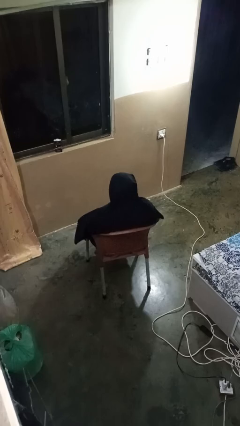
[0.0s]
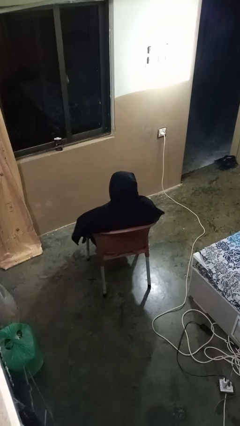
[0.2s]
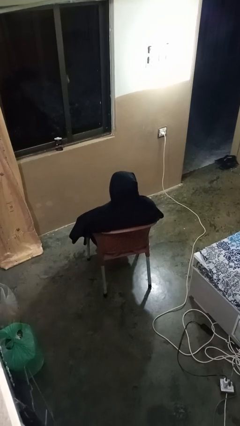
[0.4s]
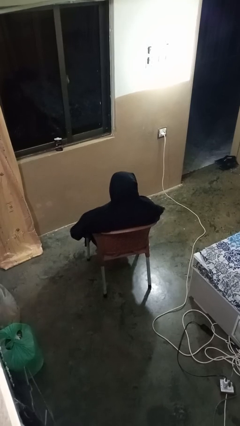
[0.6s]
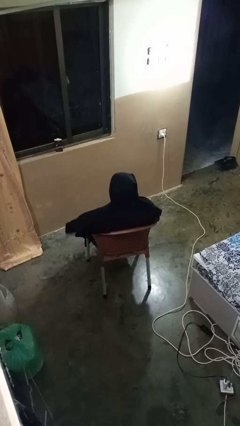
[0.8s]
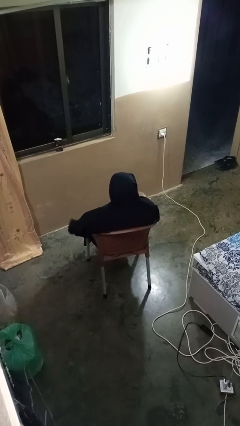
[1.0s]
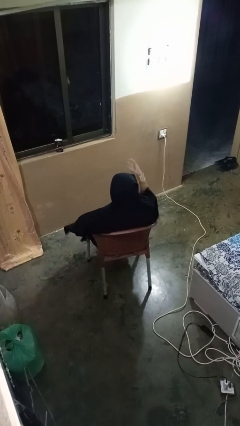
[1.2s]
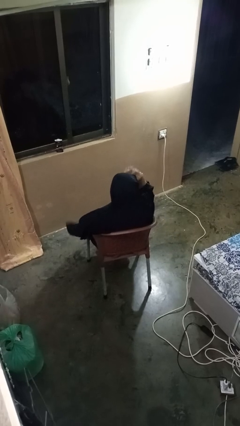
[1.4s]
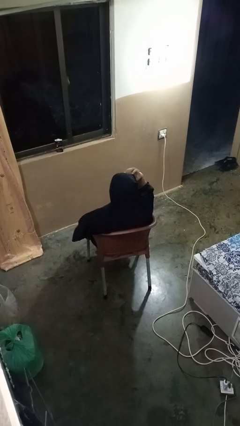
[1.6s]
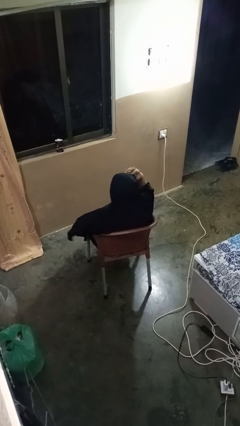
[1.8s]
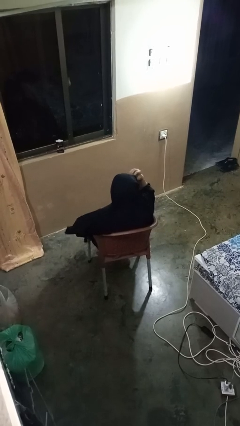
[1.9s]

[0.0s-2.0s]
person scratches face

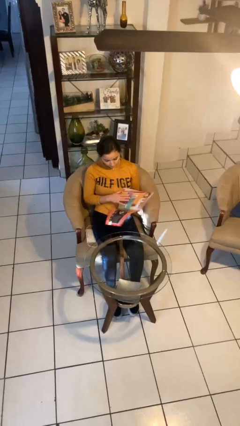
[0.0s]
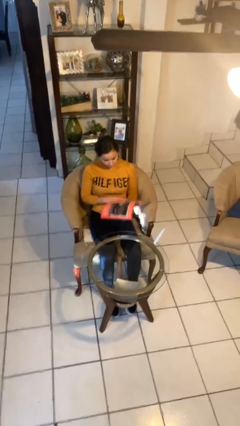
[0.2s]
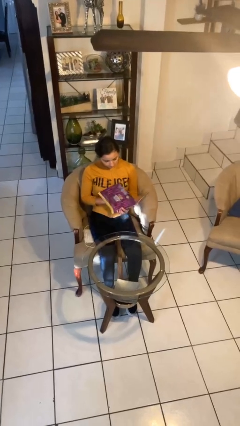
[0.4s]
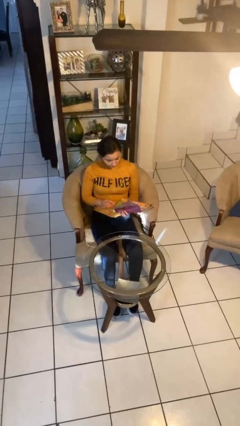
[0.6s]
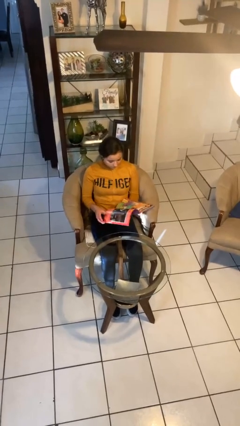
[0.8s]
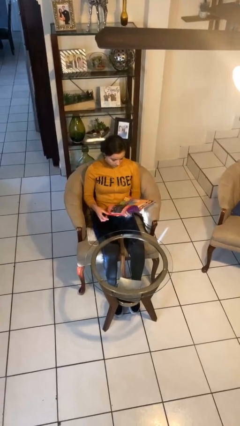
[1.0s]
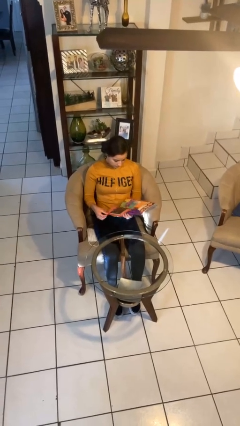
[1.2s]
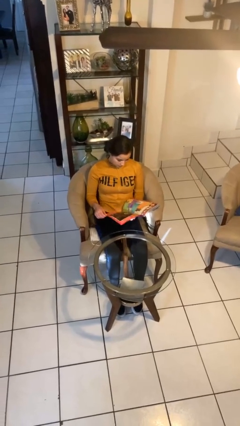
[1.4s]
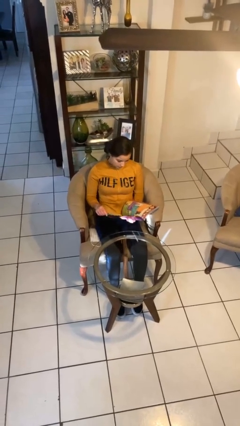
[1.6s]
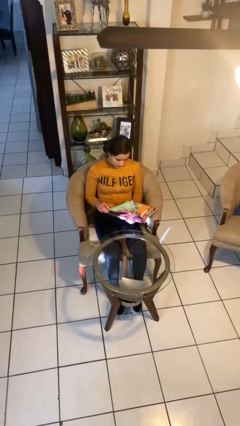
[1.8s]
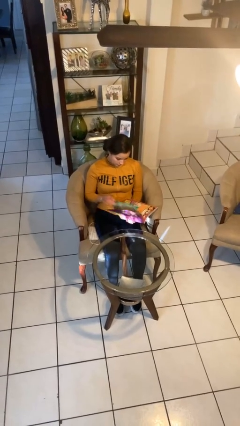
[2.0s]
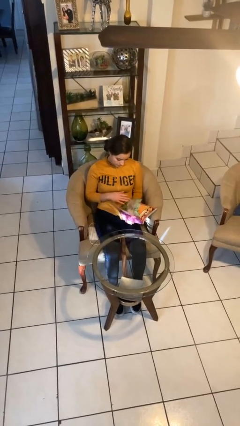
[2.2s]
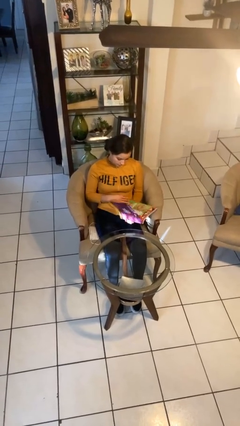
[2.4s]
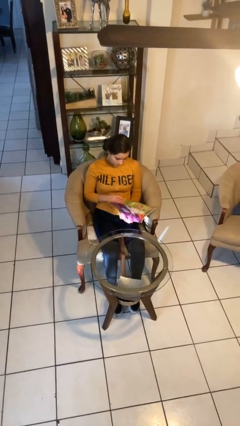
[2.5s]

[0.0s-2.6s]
person reads magazine

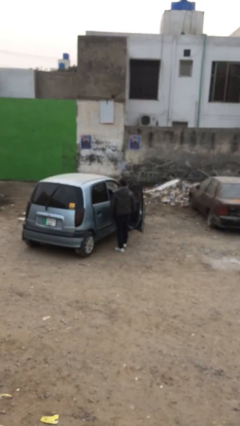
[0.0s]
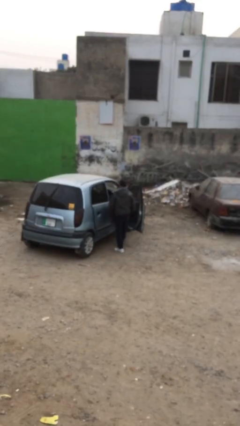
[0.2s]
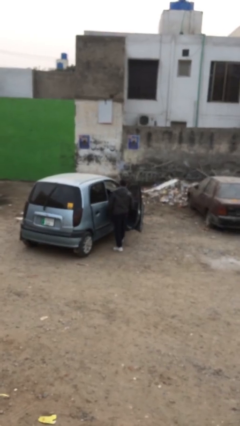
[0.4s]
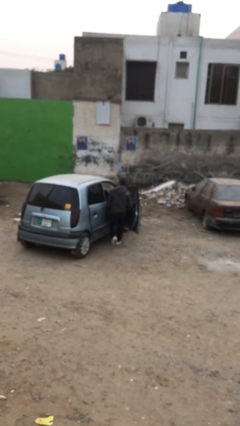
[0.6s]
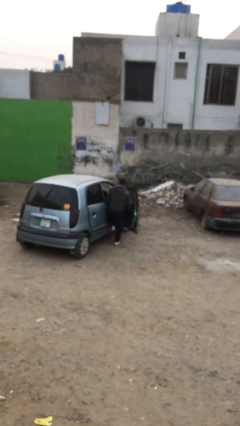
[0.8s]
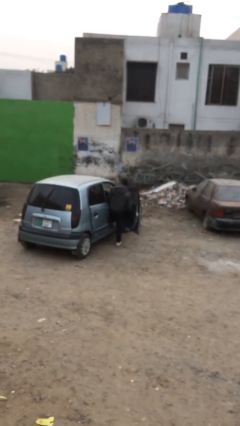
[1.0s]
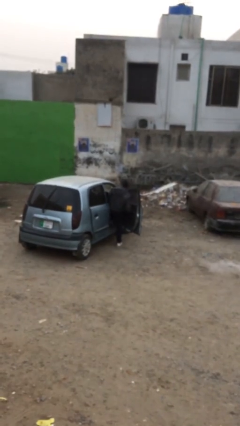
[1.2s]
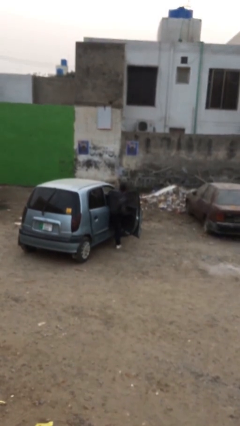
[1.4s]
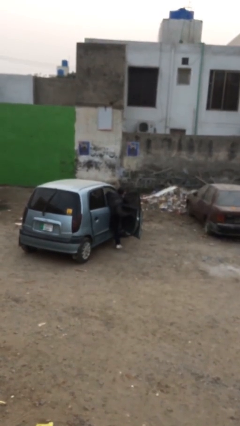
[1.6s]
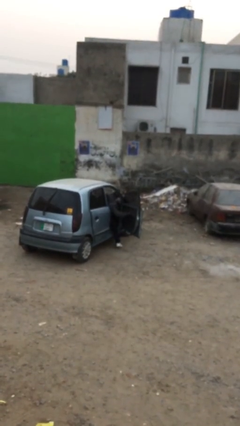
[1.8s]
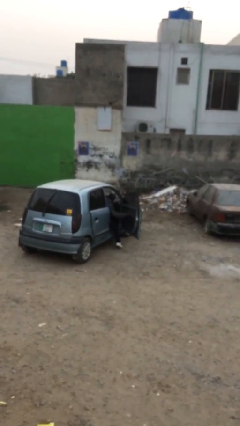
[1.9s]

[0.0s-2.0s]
person enters car

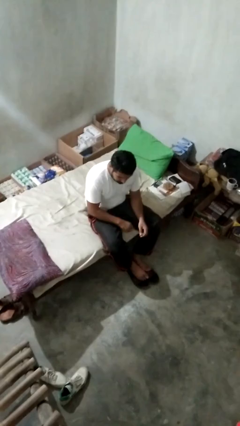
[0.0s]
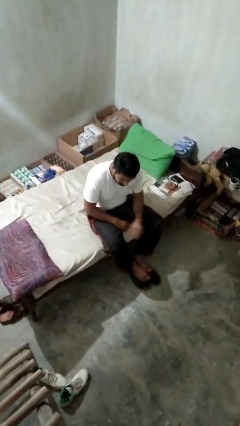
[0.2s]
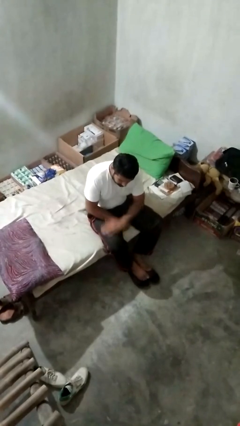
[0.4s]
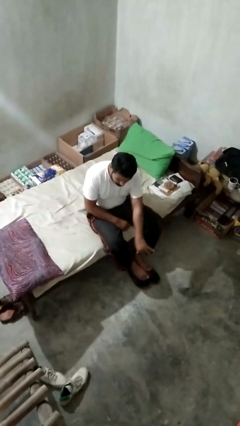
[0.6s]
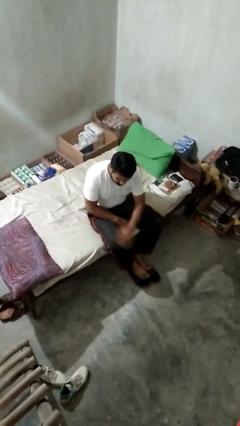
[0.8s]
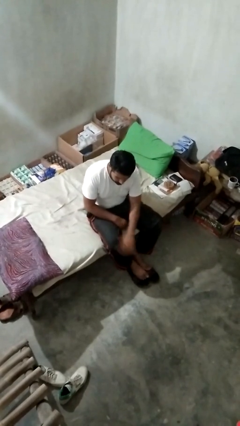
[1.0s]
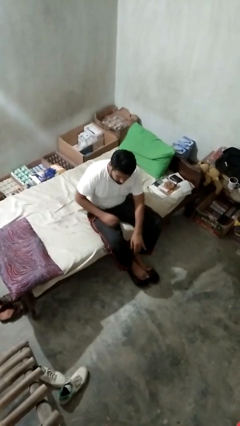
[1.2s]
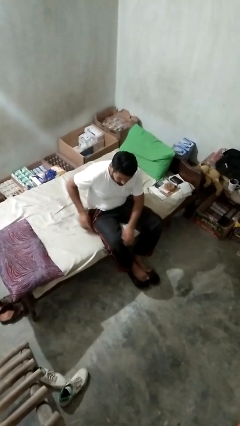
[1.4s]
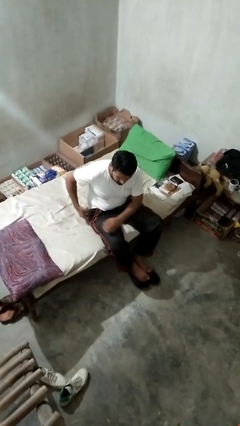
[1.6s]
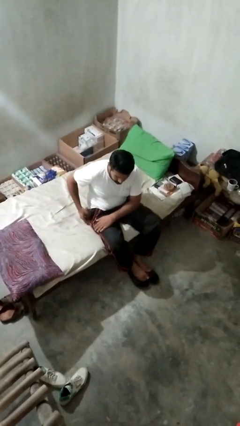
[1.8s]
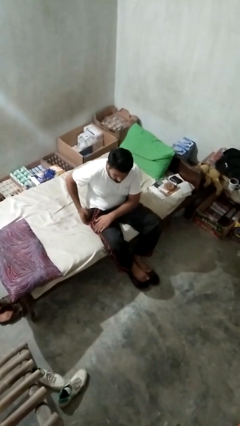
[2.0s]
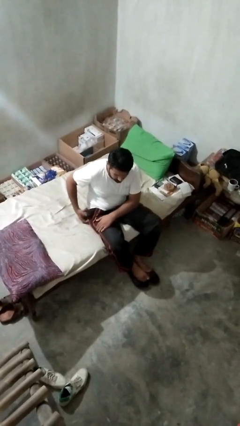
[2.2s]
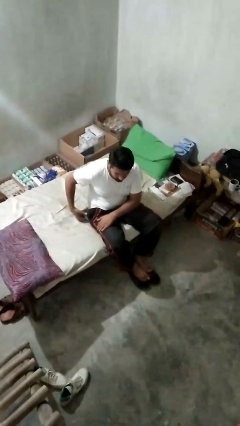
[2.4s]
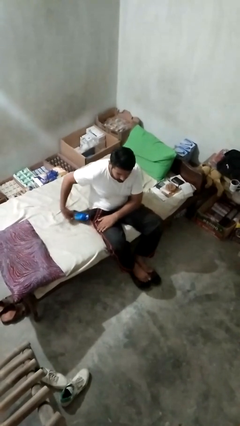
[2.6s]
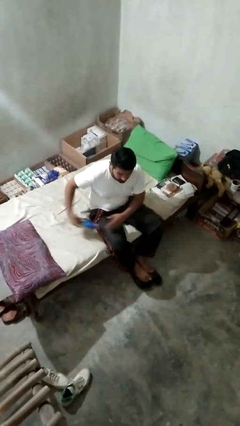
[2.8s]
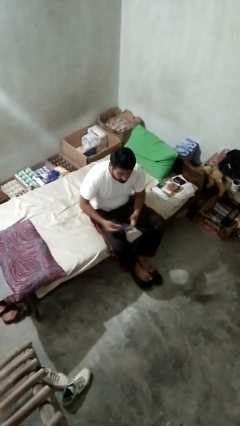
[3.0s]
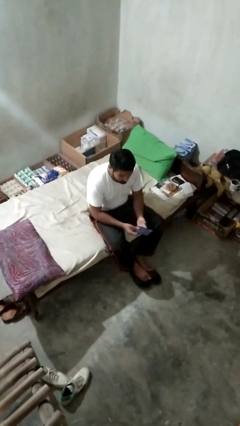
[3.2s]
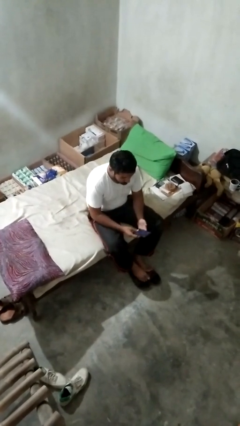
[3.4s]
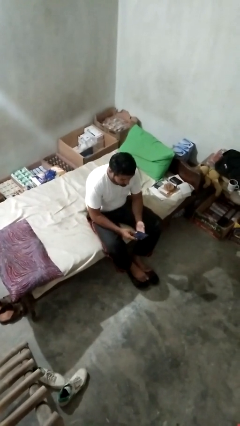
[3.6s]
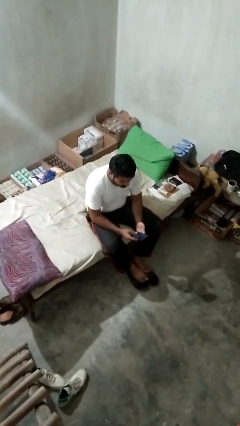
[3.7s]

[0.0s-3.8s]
person takes phone from pocket

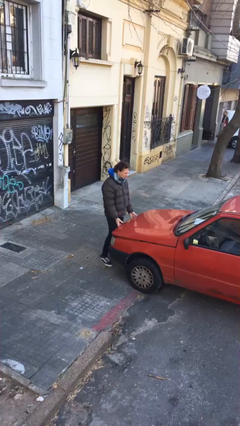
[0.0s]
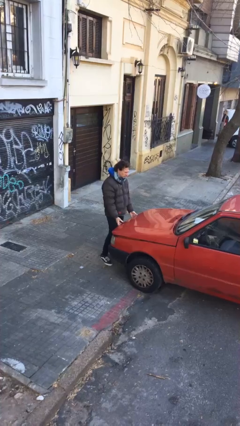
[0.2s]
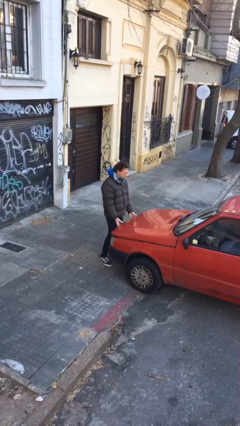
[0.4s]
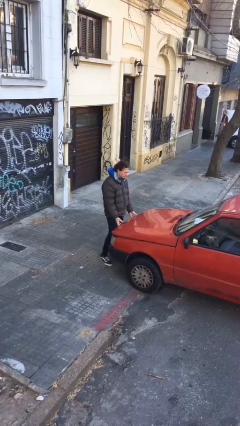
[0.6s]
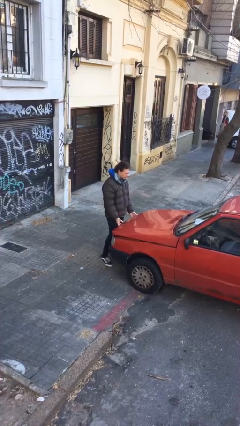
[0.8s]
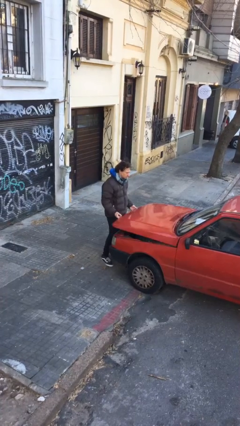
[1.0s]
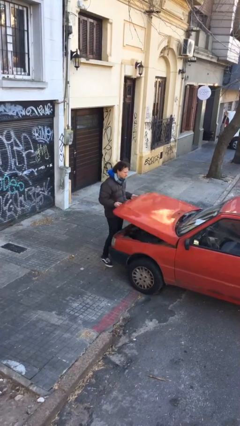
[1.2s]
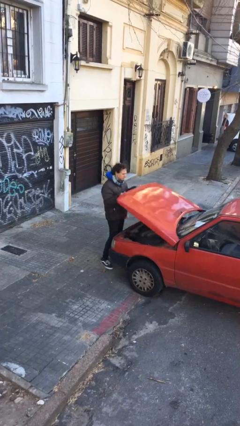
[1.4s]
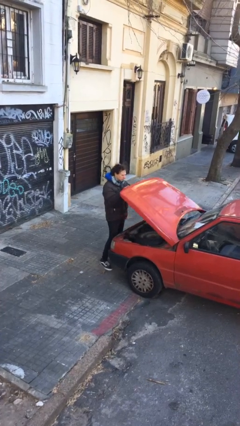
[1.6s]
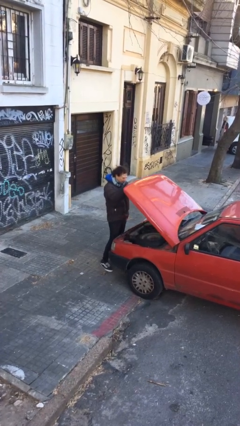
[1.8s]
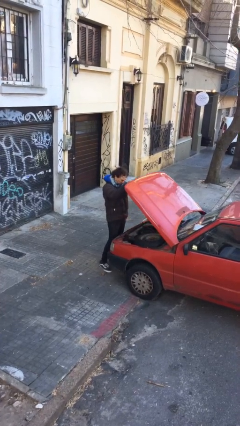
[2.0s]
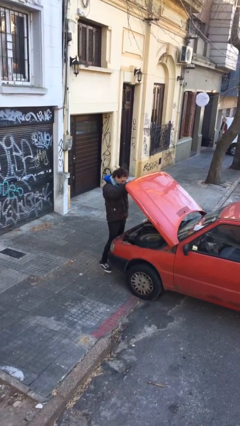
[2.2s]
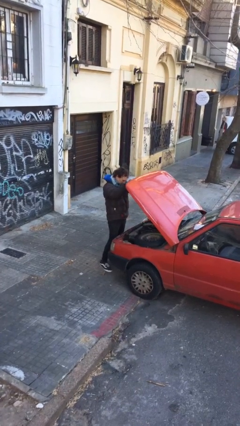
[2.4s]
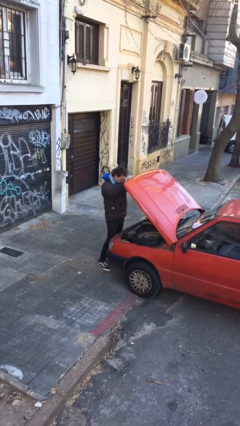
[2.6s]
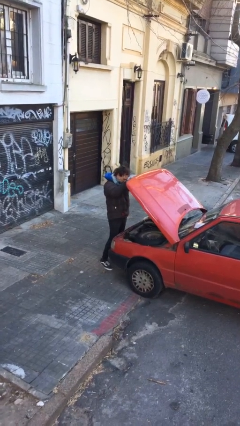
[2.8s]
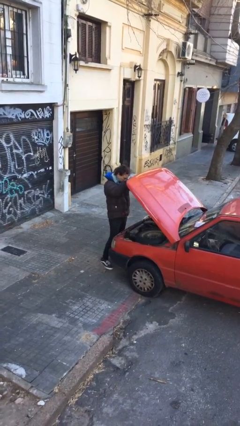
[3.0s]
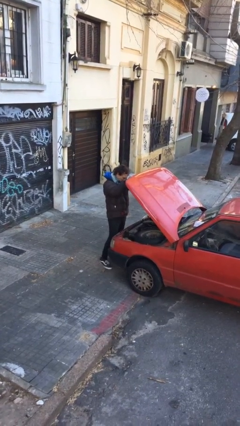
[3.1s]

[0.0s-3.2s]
person opens car hood

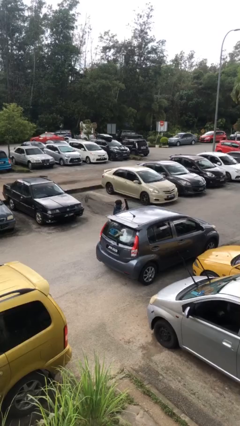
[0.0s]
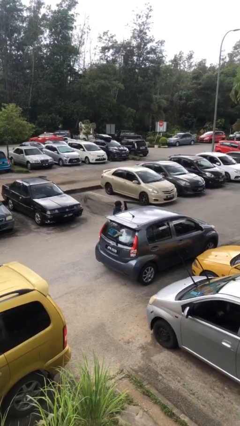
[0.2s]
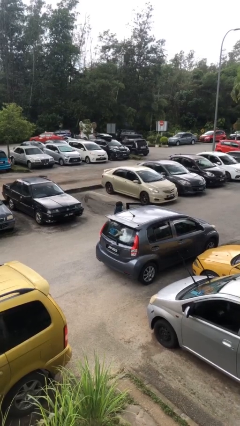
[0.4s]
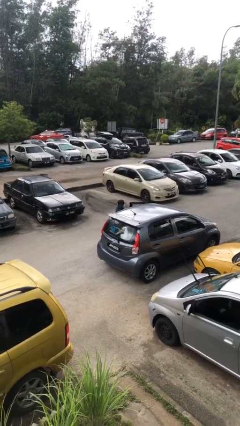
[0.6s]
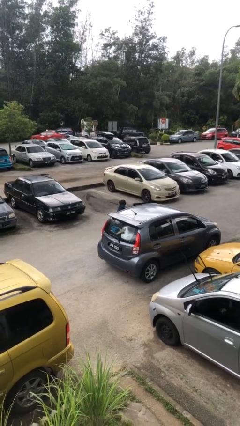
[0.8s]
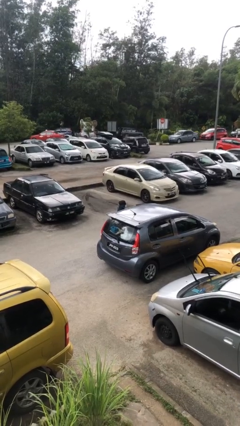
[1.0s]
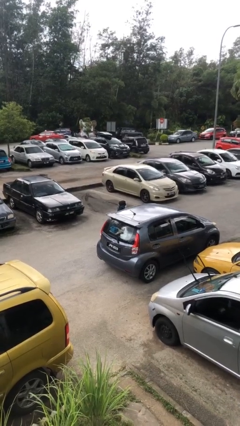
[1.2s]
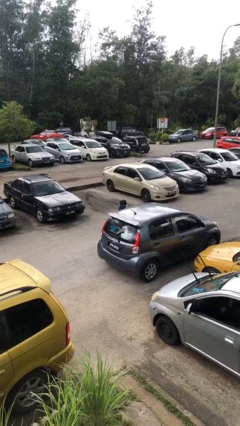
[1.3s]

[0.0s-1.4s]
person closes car door

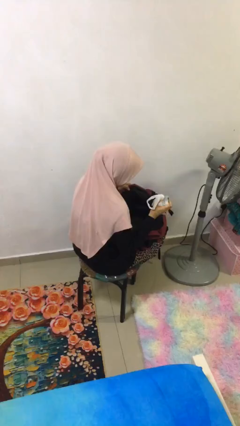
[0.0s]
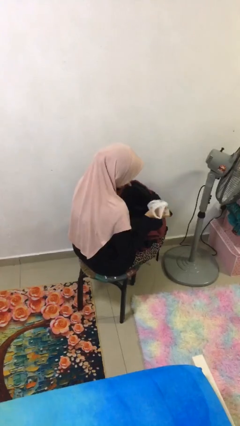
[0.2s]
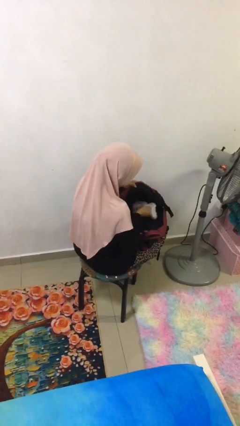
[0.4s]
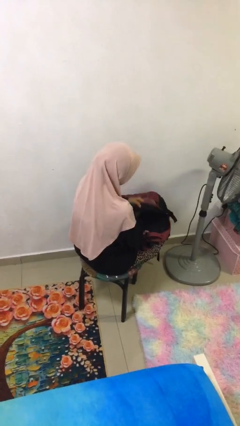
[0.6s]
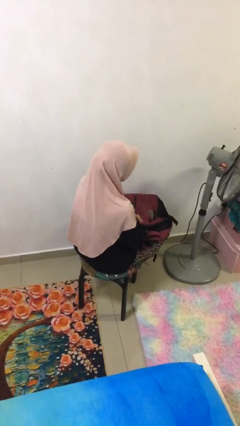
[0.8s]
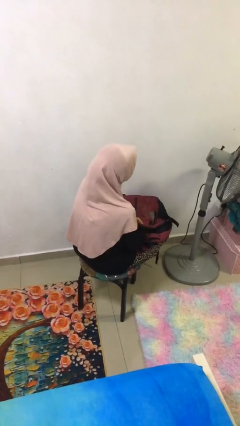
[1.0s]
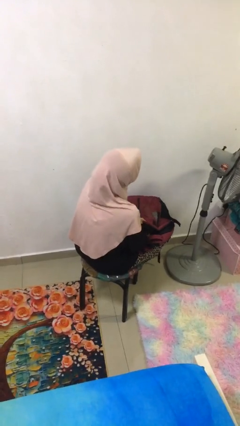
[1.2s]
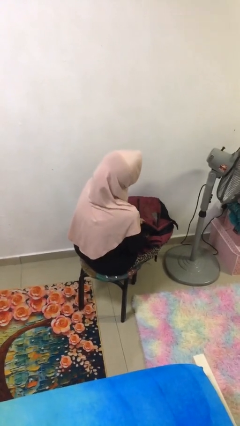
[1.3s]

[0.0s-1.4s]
person puts object into backpack

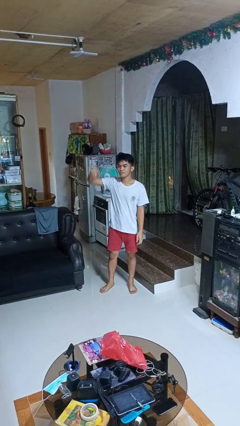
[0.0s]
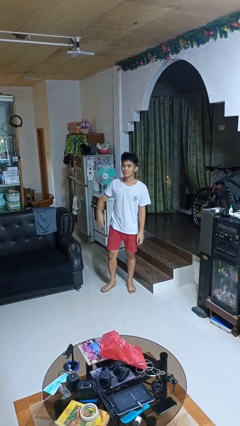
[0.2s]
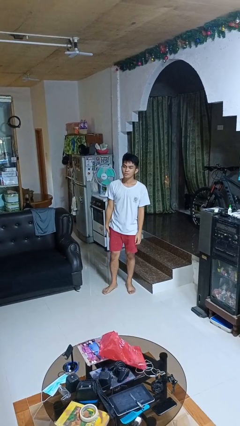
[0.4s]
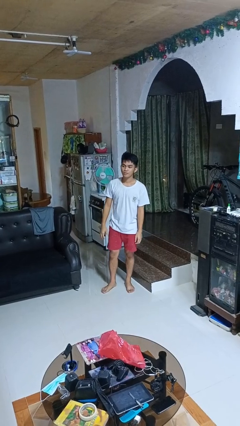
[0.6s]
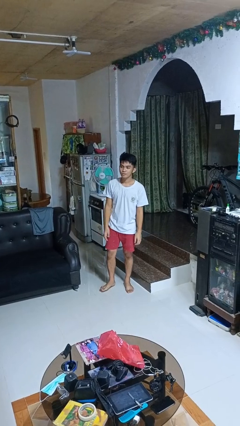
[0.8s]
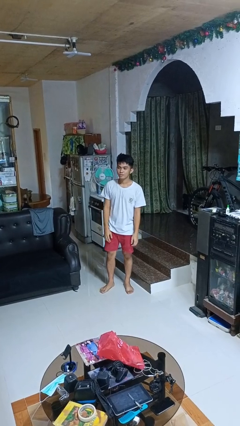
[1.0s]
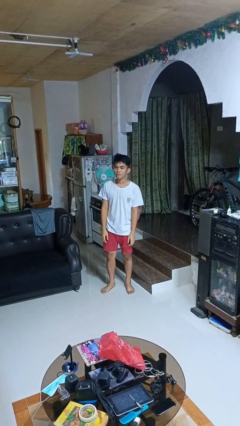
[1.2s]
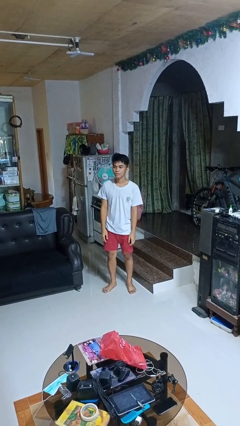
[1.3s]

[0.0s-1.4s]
person gestures lower hand
